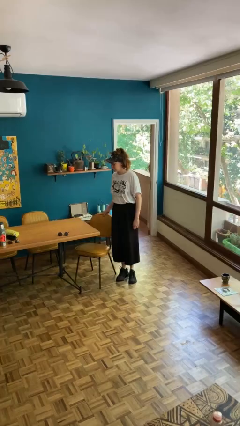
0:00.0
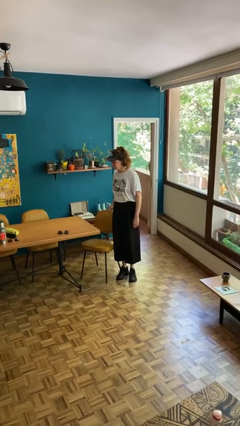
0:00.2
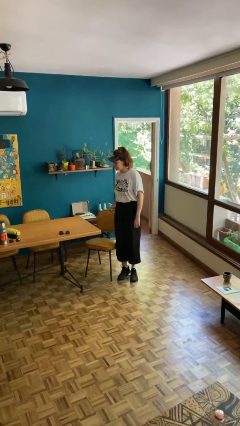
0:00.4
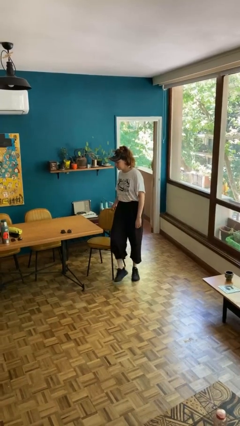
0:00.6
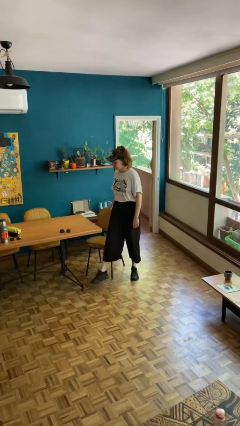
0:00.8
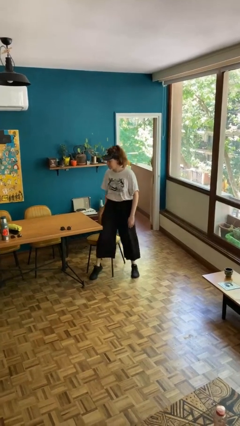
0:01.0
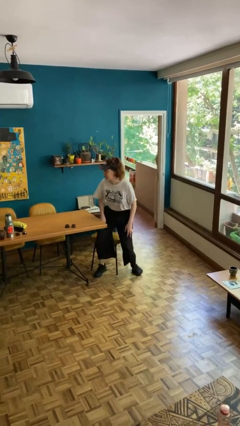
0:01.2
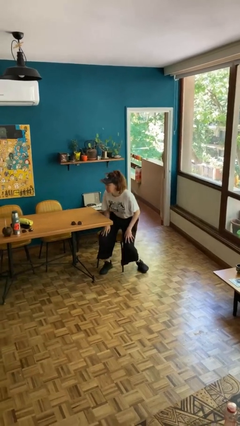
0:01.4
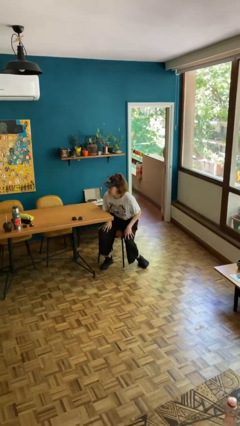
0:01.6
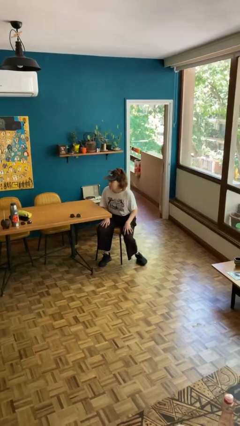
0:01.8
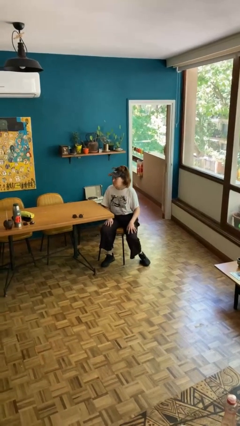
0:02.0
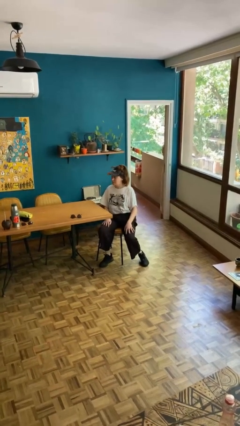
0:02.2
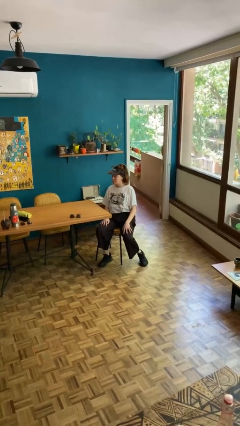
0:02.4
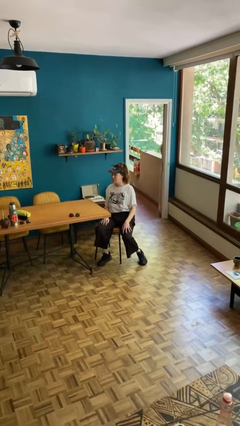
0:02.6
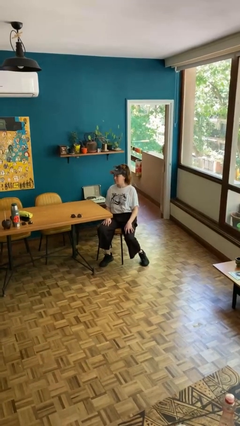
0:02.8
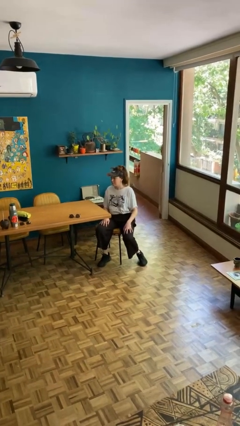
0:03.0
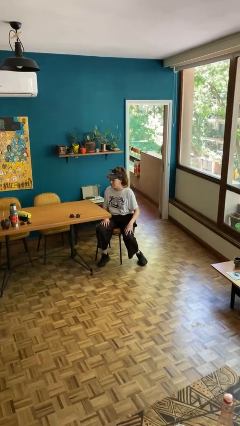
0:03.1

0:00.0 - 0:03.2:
person sits down

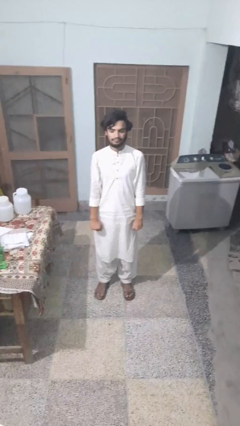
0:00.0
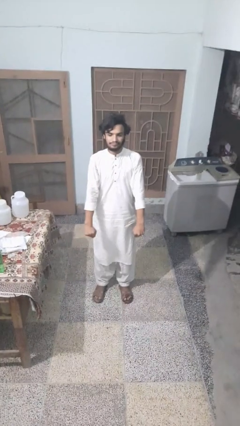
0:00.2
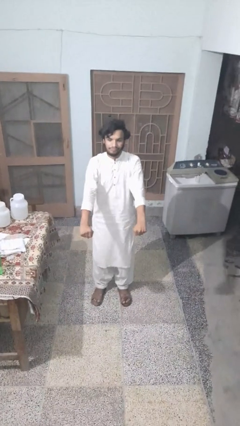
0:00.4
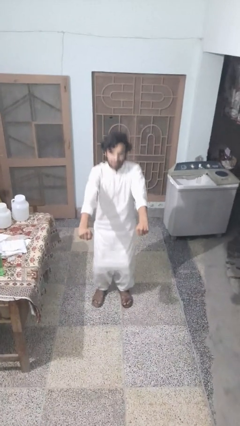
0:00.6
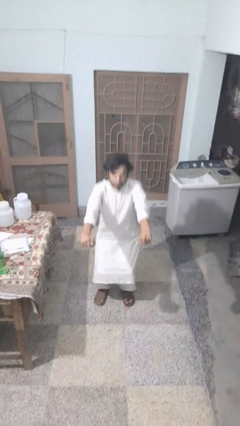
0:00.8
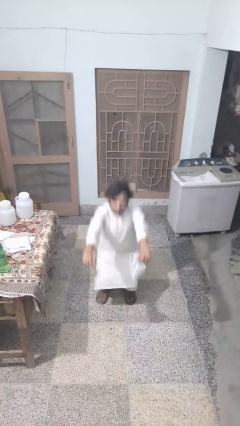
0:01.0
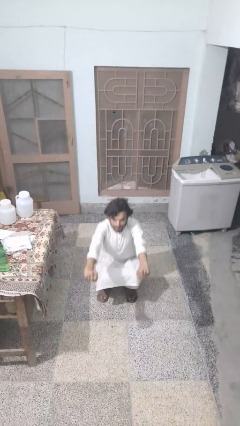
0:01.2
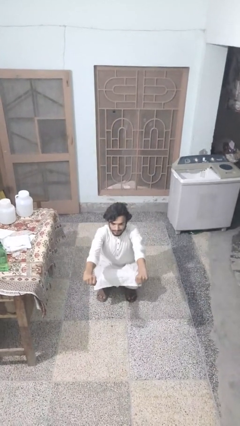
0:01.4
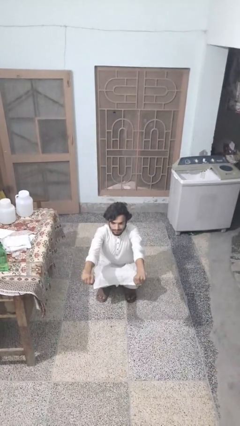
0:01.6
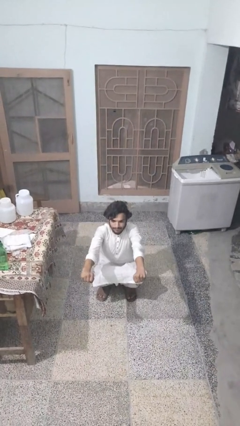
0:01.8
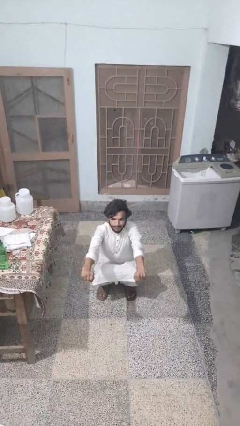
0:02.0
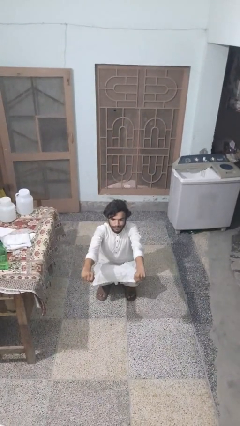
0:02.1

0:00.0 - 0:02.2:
person squats

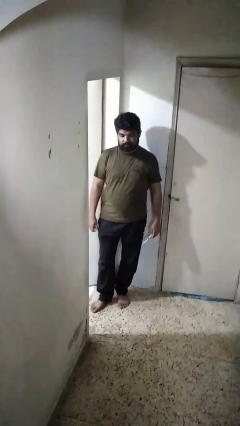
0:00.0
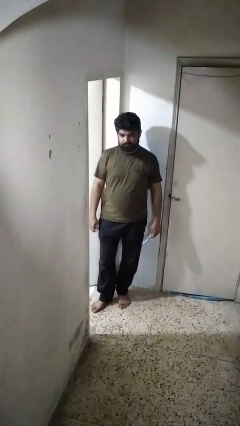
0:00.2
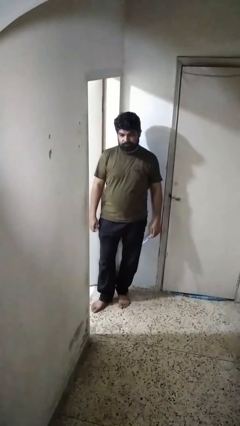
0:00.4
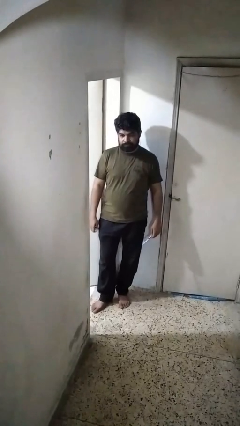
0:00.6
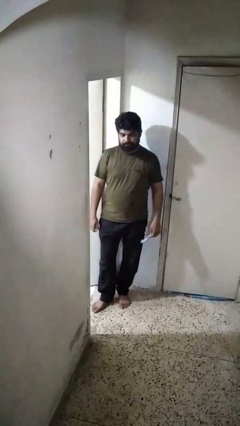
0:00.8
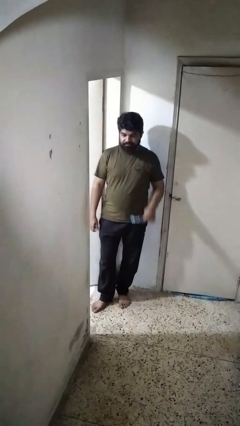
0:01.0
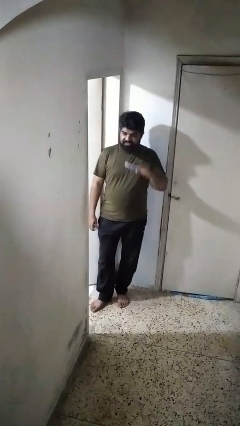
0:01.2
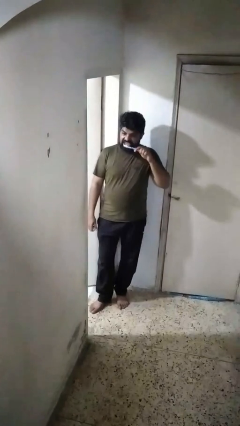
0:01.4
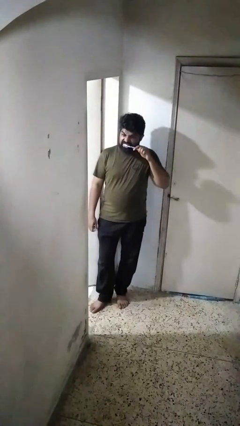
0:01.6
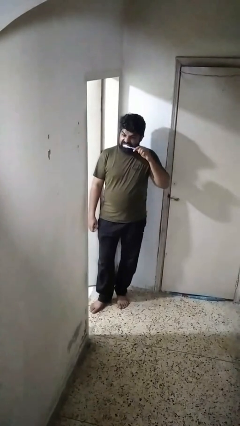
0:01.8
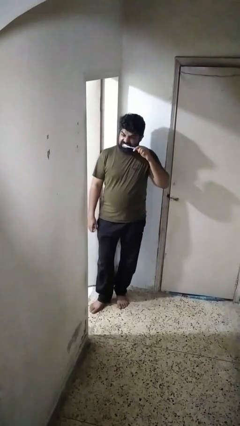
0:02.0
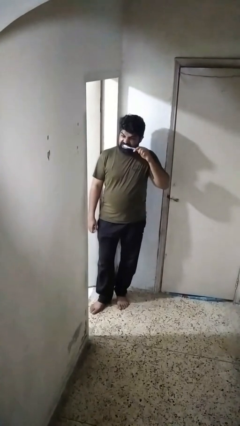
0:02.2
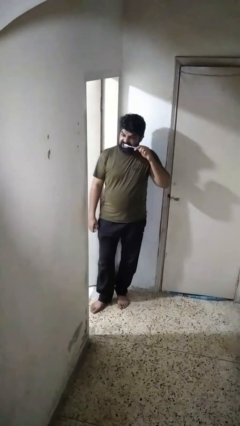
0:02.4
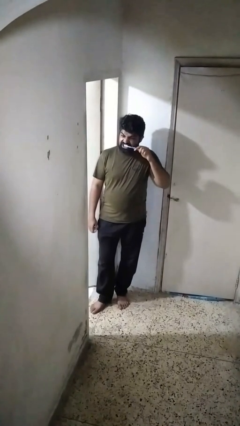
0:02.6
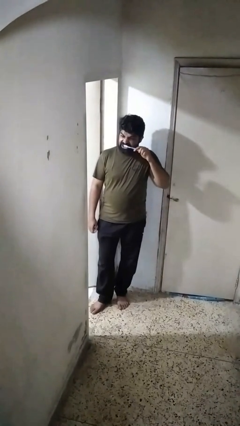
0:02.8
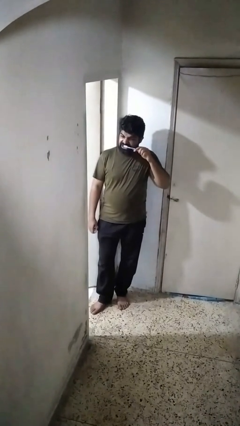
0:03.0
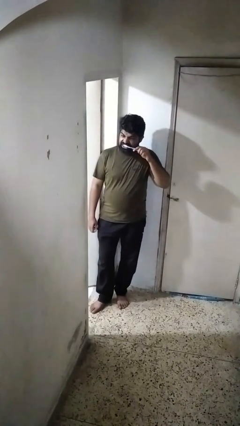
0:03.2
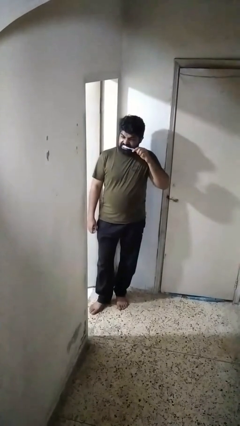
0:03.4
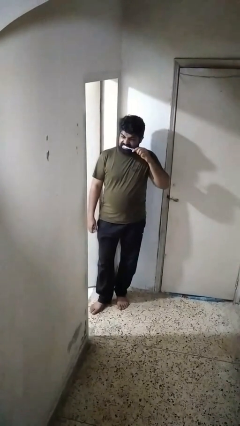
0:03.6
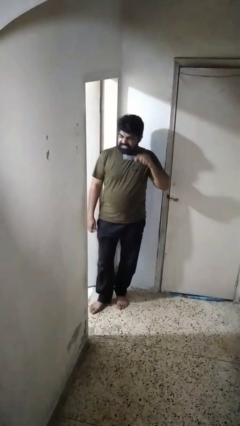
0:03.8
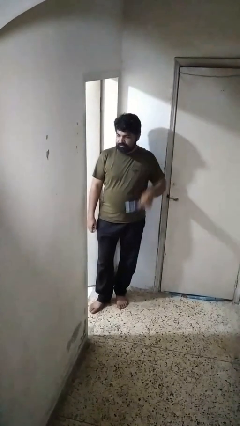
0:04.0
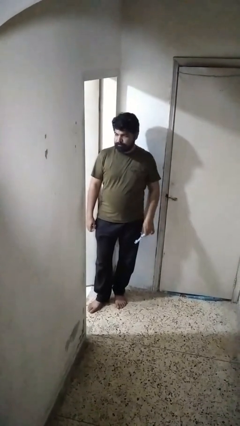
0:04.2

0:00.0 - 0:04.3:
person brushes teeth

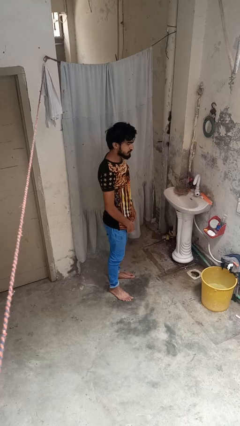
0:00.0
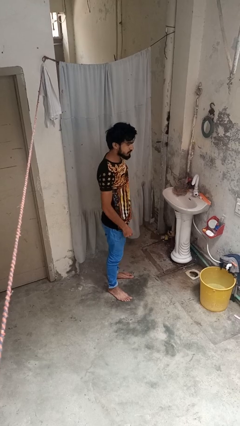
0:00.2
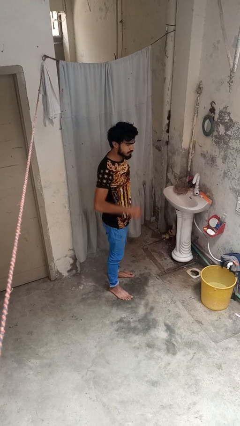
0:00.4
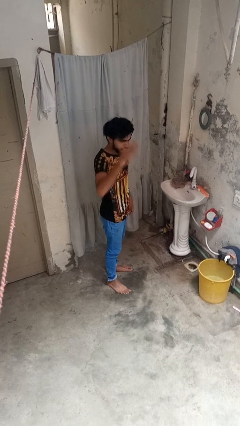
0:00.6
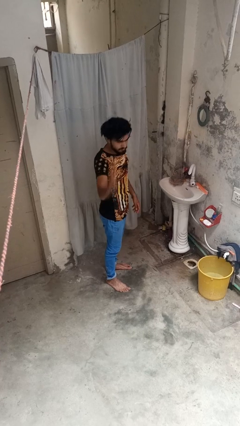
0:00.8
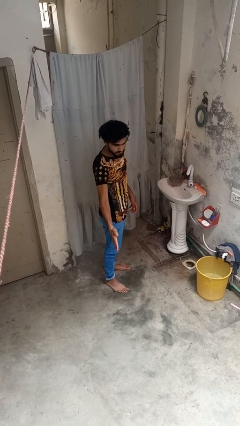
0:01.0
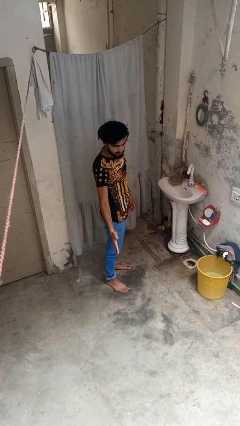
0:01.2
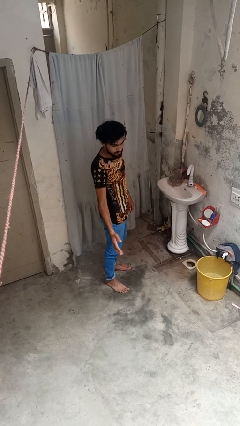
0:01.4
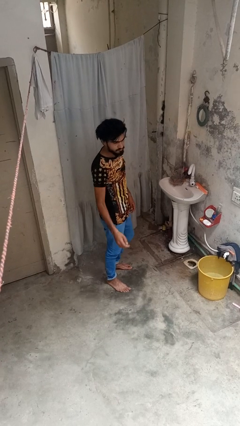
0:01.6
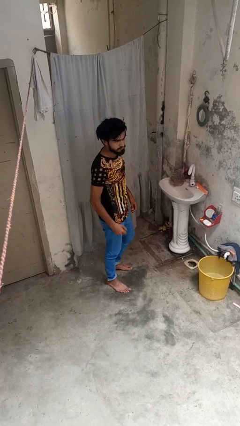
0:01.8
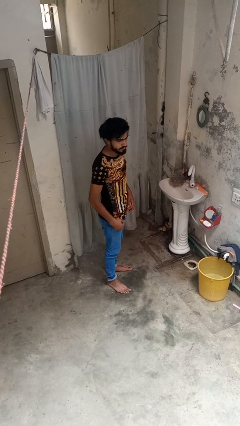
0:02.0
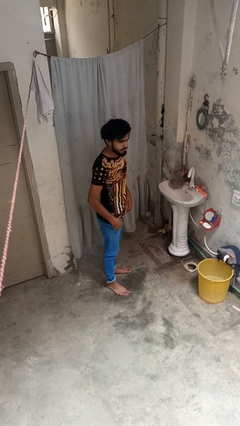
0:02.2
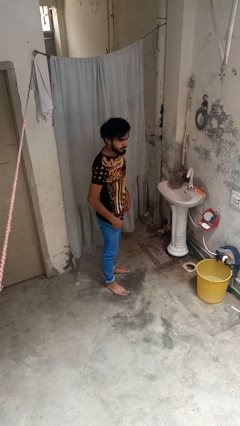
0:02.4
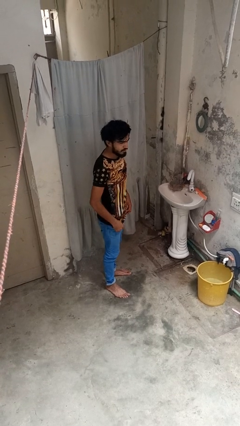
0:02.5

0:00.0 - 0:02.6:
person karate chop

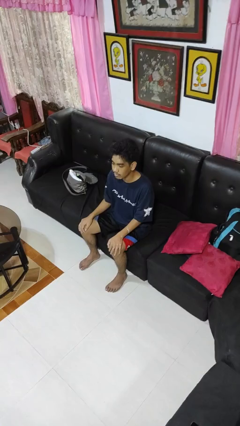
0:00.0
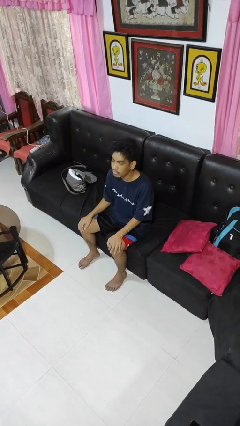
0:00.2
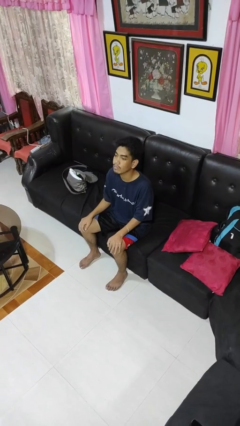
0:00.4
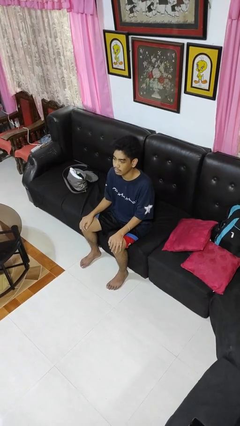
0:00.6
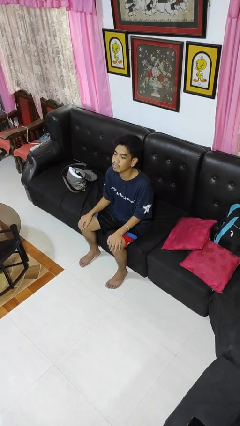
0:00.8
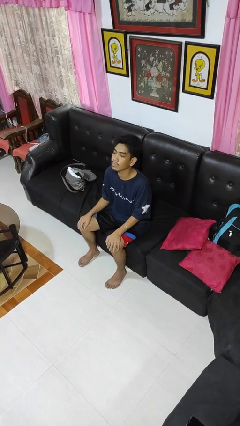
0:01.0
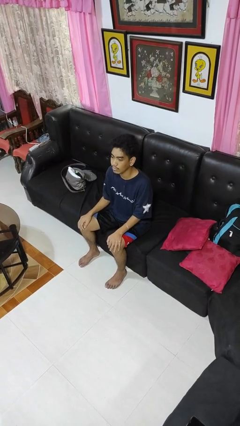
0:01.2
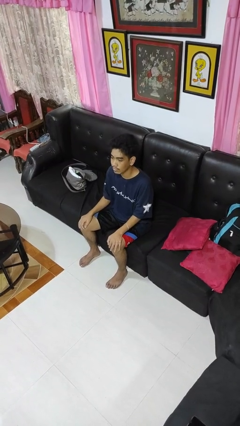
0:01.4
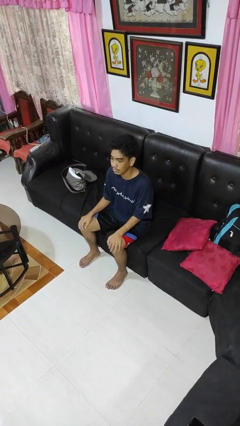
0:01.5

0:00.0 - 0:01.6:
person nods head

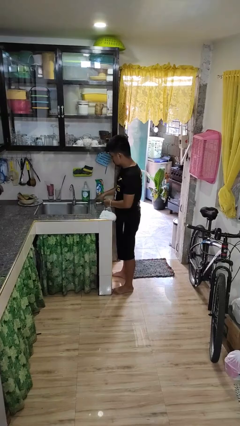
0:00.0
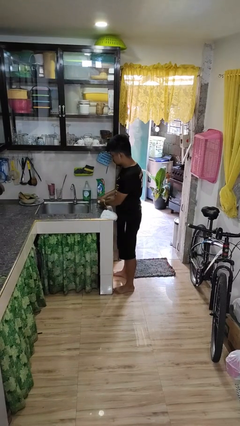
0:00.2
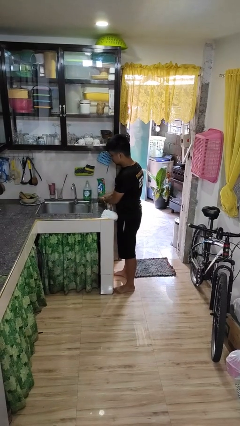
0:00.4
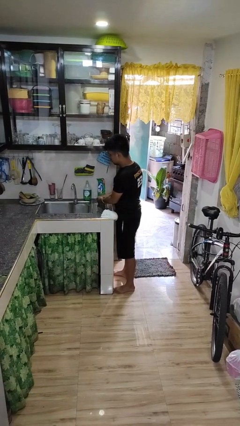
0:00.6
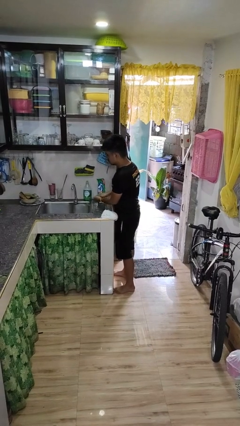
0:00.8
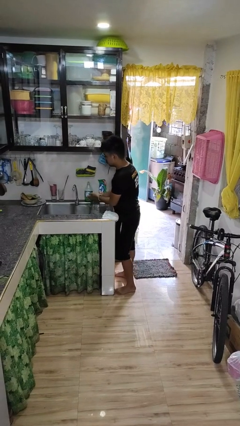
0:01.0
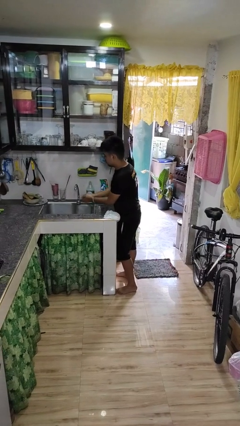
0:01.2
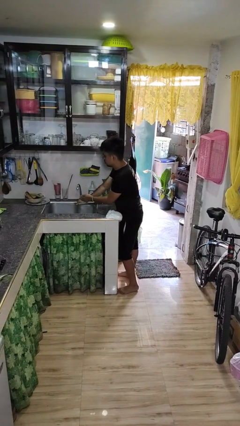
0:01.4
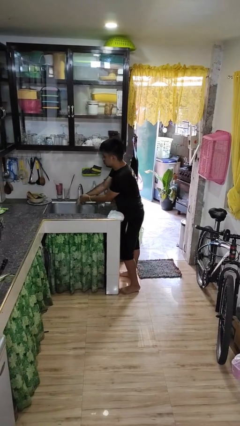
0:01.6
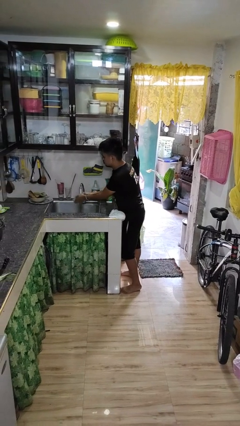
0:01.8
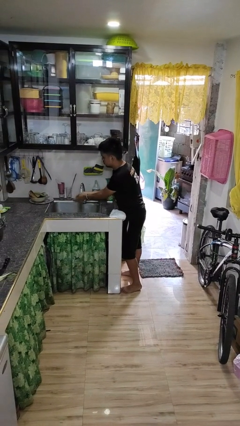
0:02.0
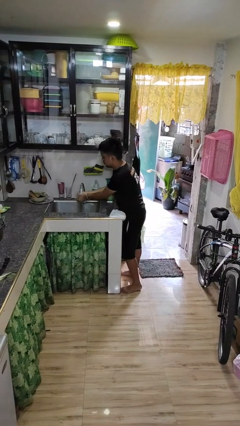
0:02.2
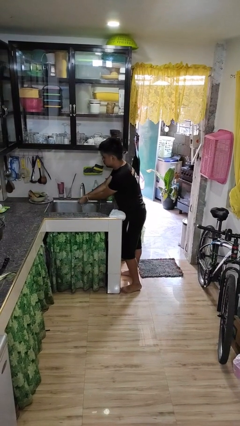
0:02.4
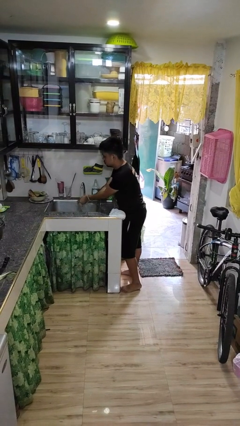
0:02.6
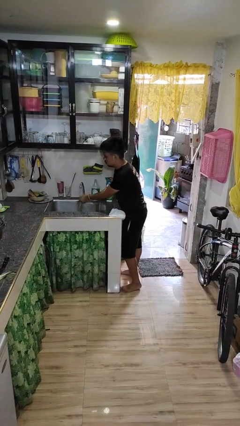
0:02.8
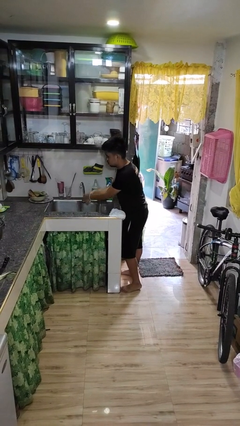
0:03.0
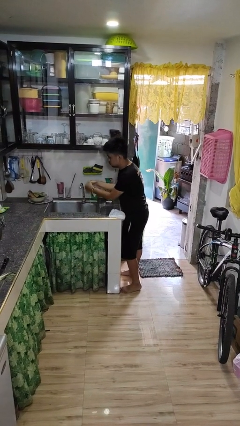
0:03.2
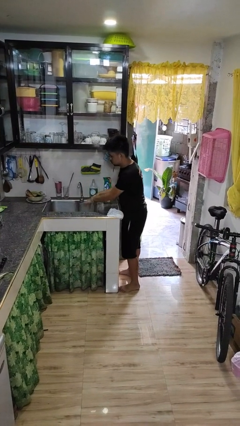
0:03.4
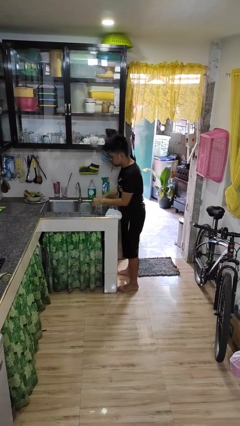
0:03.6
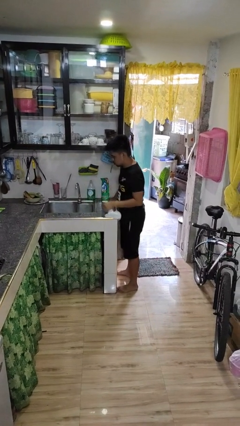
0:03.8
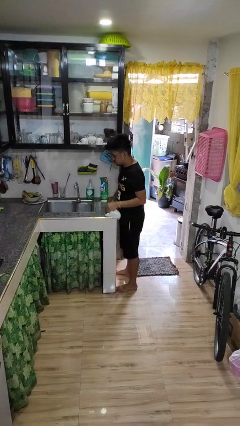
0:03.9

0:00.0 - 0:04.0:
person washes hands
